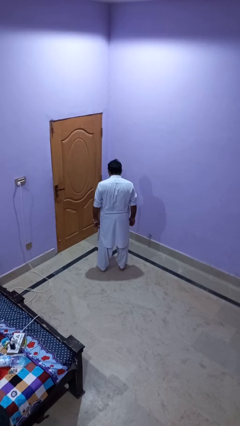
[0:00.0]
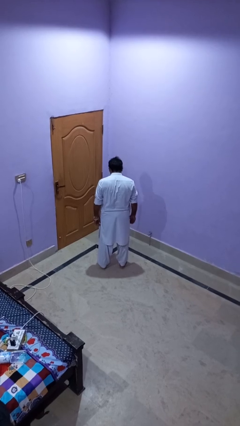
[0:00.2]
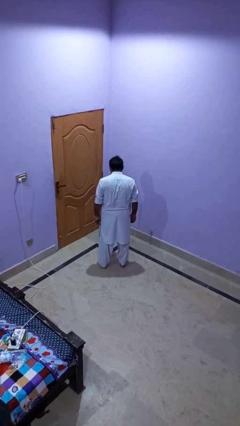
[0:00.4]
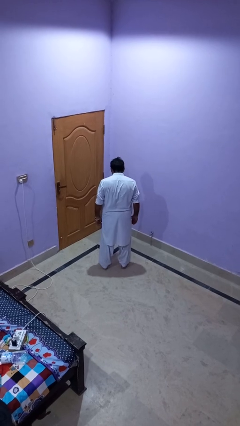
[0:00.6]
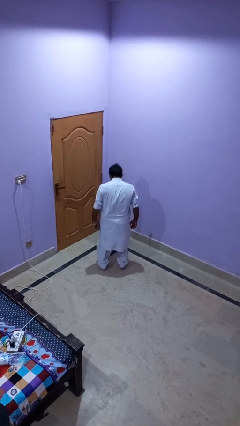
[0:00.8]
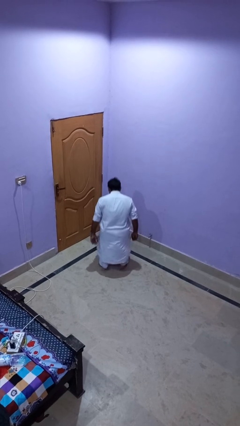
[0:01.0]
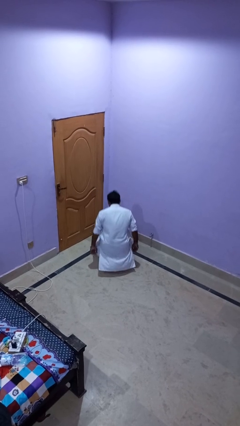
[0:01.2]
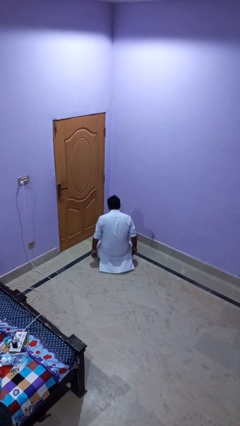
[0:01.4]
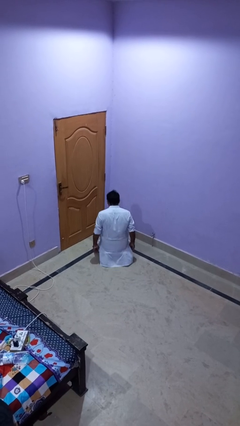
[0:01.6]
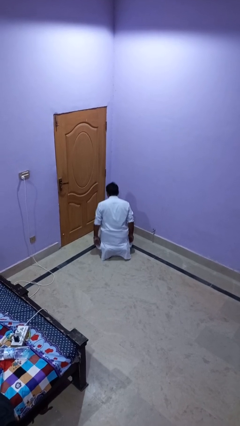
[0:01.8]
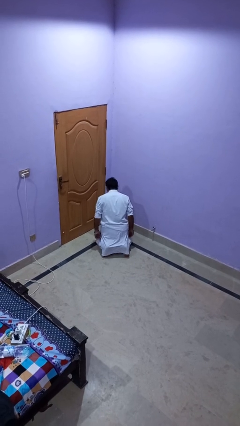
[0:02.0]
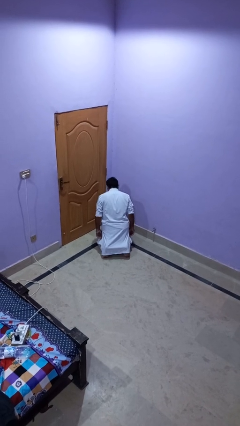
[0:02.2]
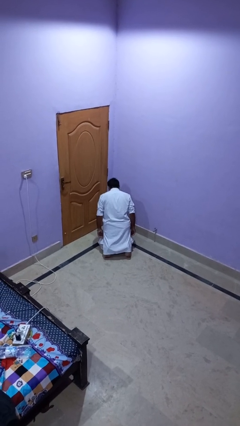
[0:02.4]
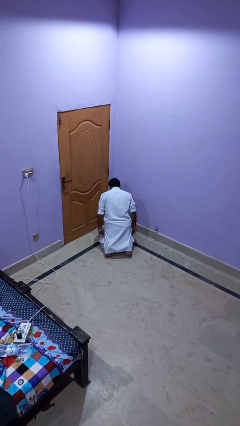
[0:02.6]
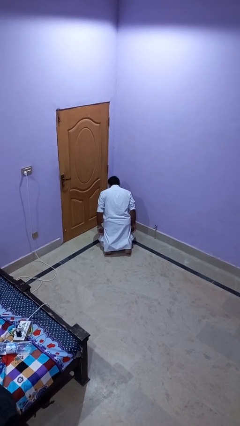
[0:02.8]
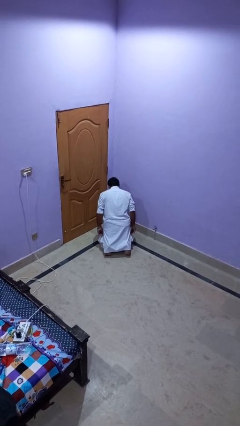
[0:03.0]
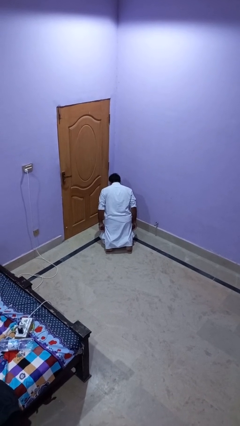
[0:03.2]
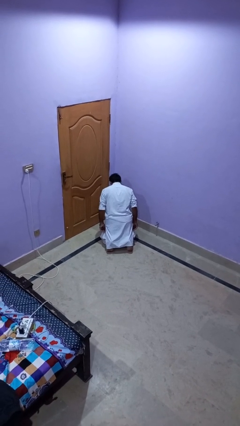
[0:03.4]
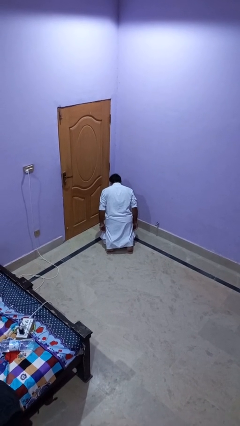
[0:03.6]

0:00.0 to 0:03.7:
person kneels

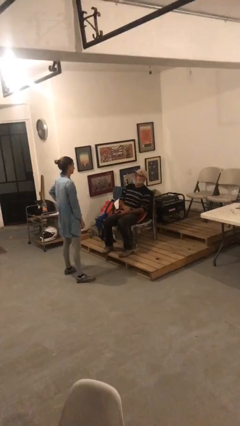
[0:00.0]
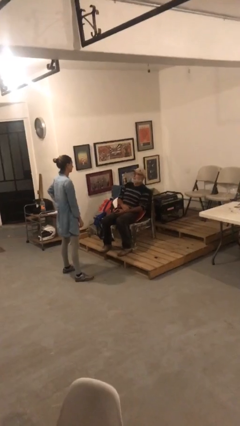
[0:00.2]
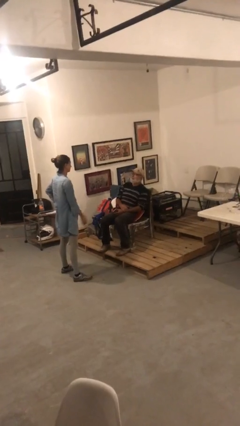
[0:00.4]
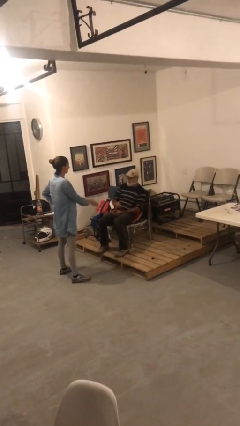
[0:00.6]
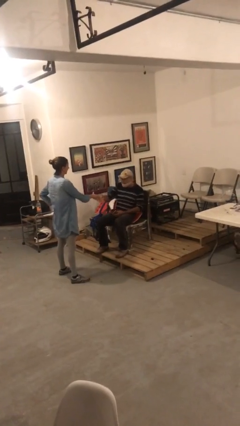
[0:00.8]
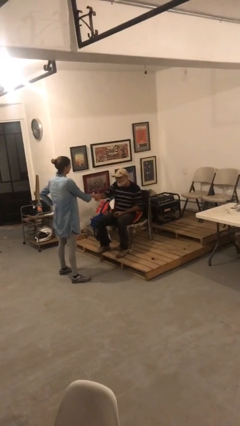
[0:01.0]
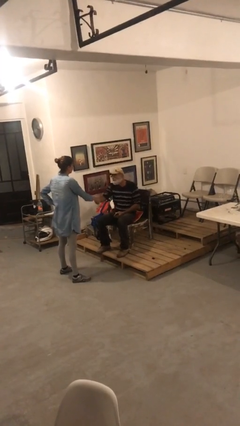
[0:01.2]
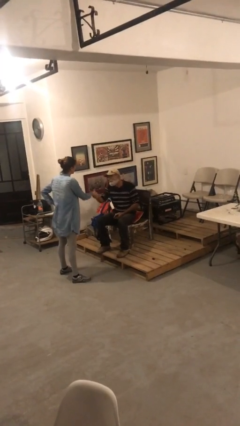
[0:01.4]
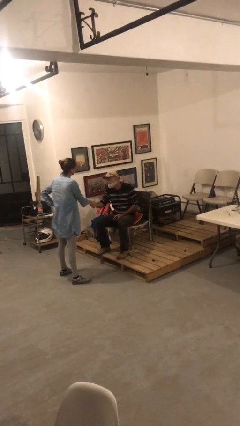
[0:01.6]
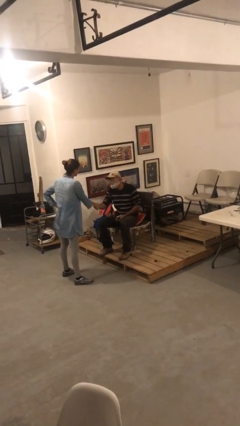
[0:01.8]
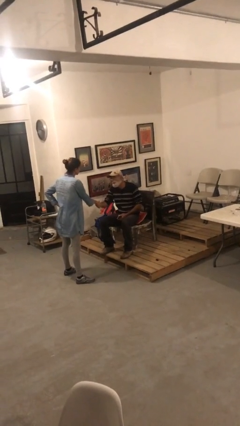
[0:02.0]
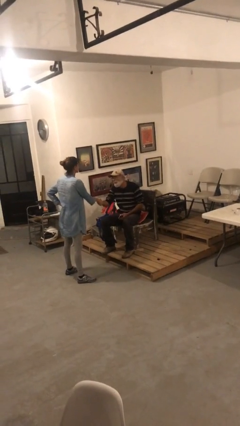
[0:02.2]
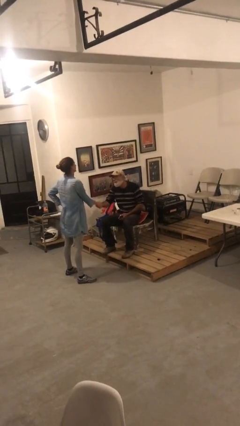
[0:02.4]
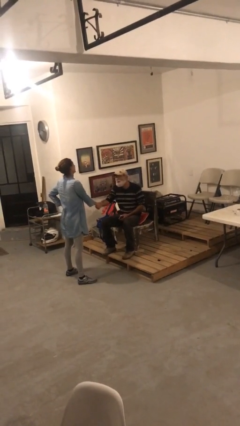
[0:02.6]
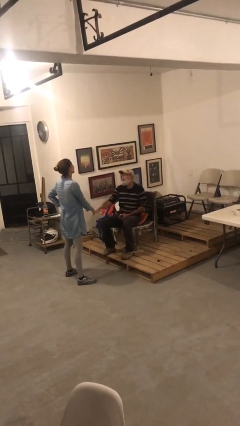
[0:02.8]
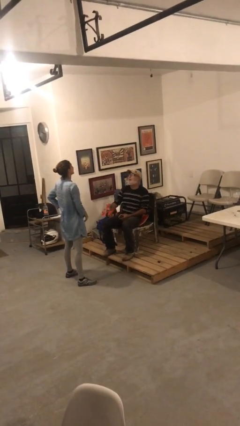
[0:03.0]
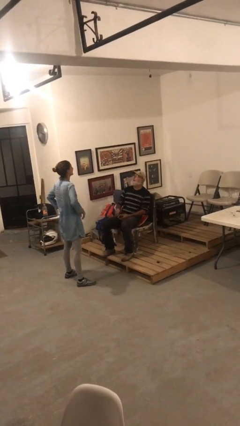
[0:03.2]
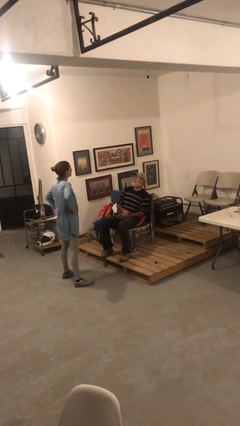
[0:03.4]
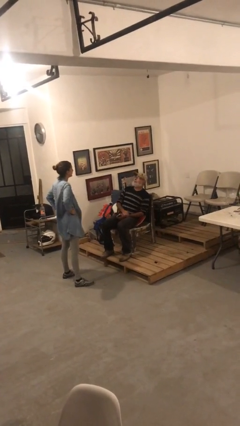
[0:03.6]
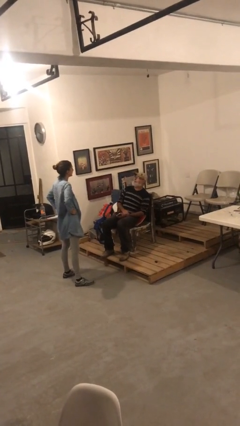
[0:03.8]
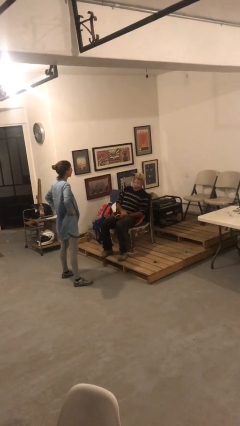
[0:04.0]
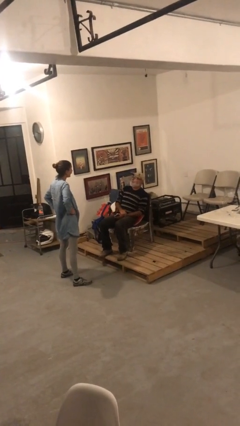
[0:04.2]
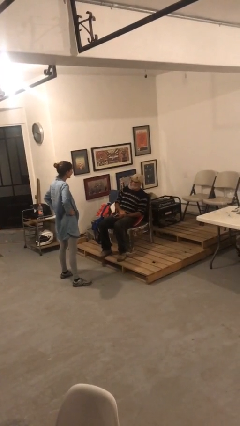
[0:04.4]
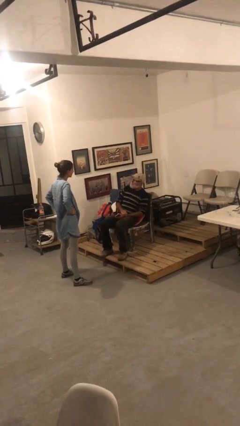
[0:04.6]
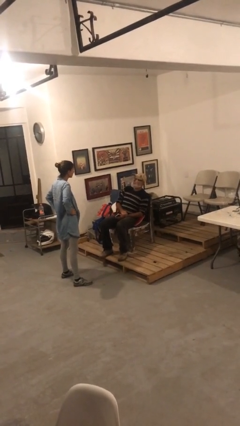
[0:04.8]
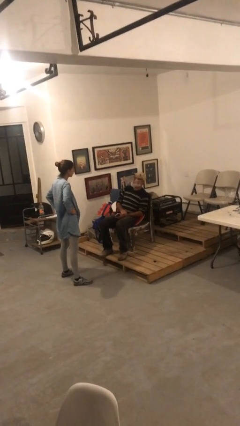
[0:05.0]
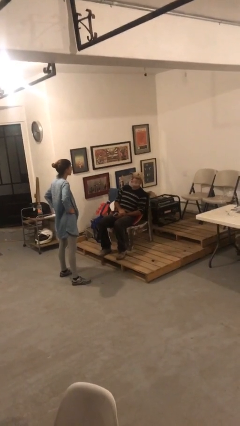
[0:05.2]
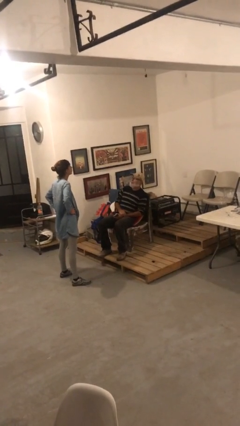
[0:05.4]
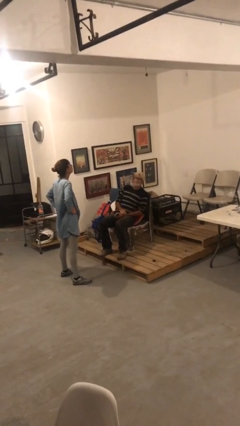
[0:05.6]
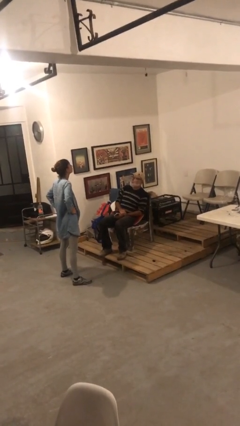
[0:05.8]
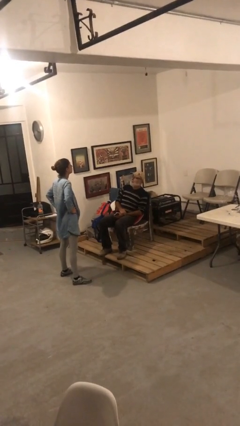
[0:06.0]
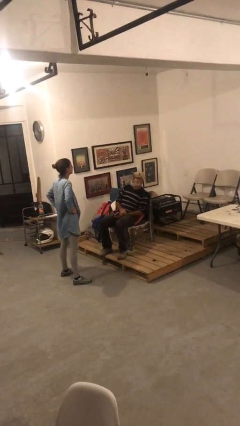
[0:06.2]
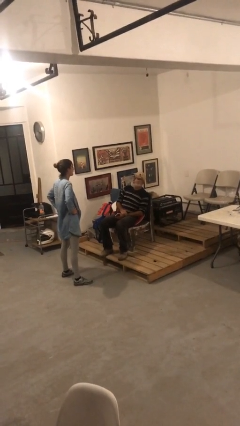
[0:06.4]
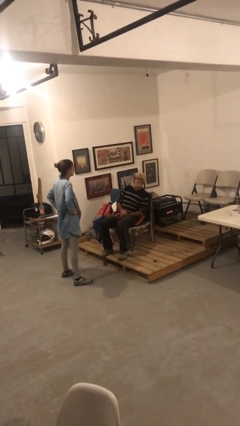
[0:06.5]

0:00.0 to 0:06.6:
person shakes hand

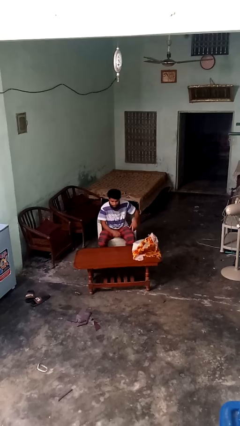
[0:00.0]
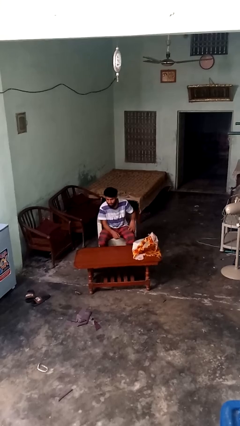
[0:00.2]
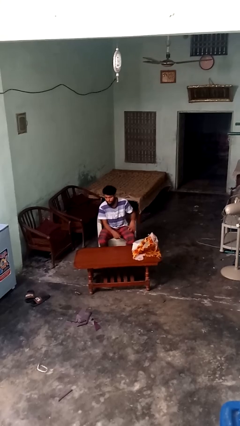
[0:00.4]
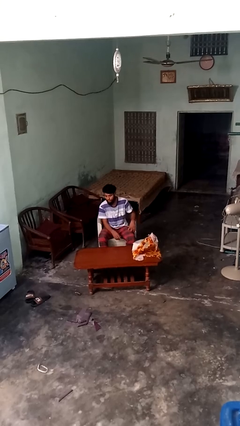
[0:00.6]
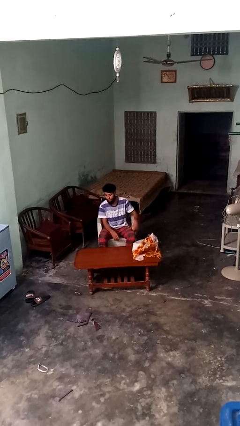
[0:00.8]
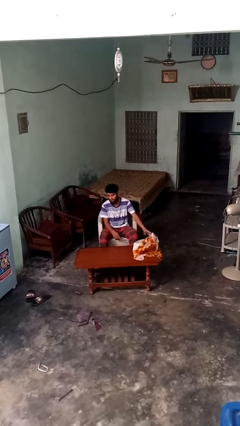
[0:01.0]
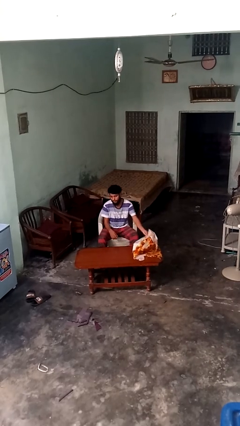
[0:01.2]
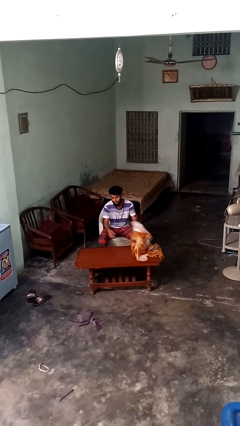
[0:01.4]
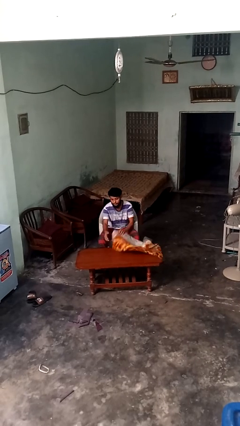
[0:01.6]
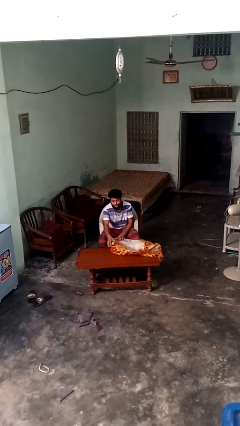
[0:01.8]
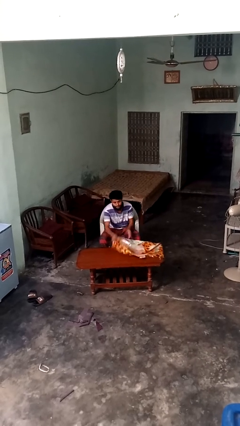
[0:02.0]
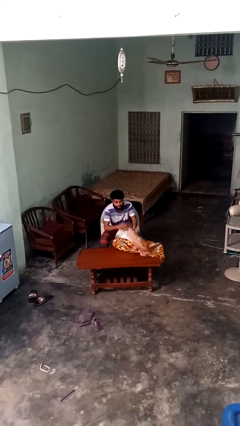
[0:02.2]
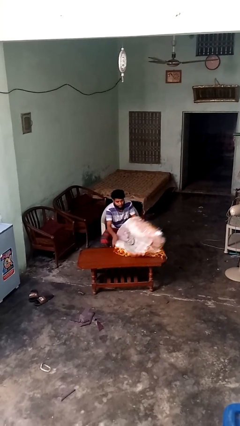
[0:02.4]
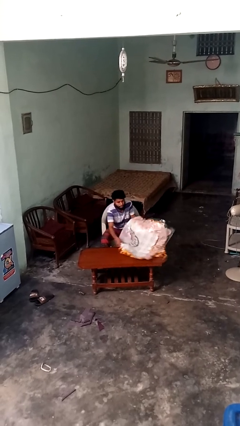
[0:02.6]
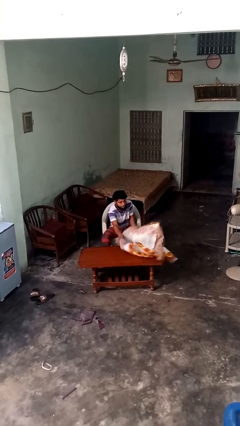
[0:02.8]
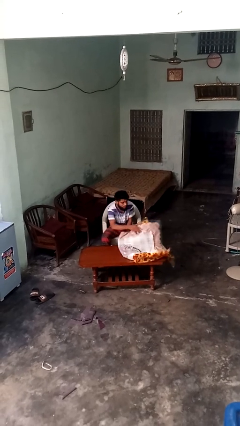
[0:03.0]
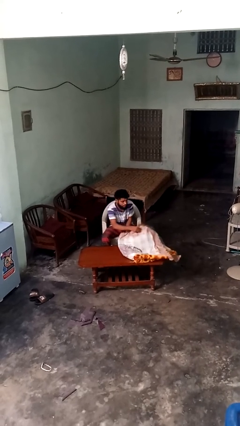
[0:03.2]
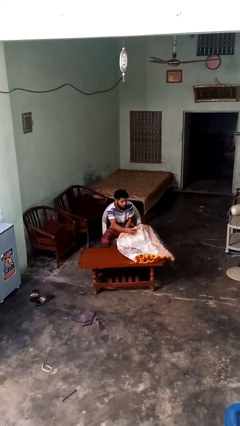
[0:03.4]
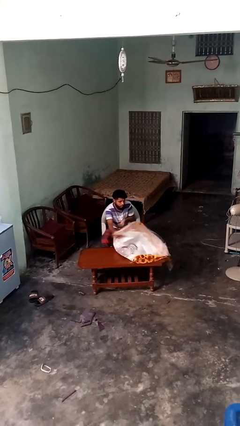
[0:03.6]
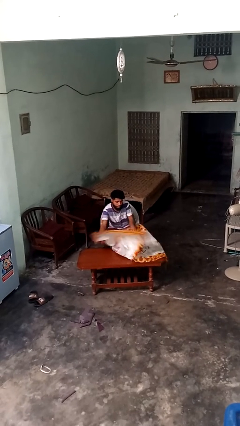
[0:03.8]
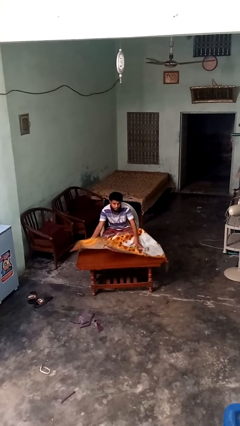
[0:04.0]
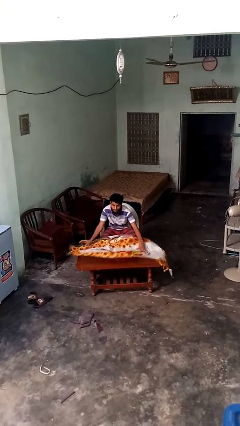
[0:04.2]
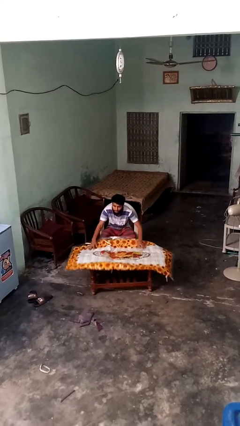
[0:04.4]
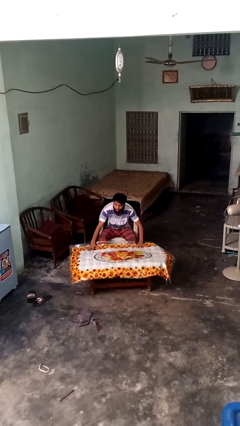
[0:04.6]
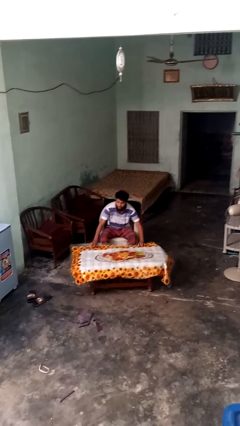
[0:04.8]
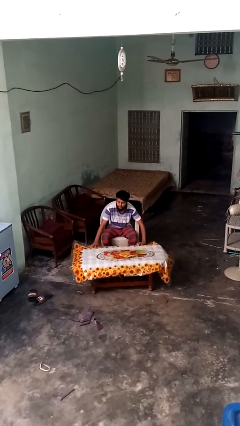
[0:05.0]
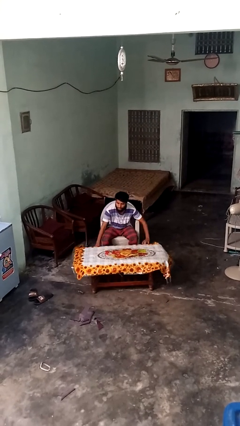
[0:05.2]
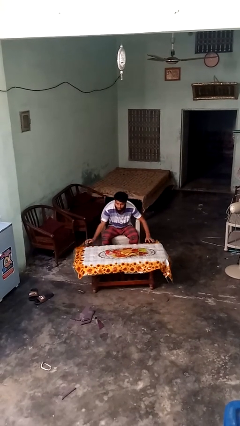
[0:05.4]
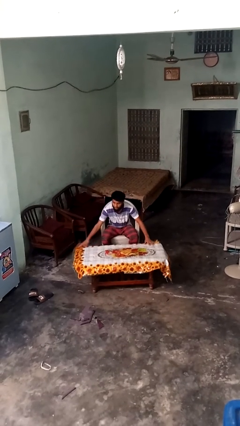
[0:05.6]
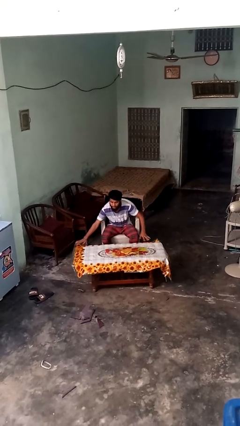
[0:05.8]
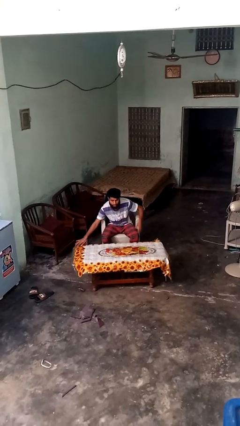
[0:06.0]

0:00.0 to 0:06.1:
person spreads tablecloth

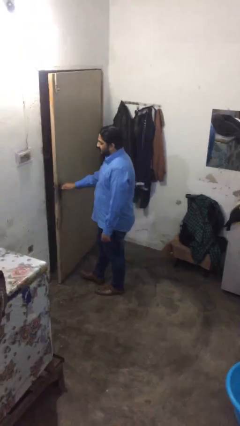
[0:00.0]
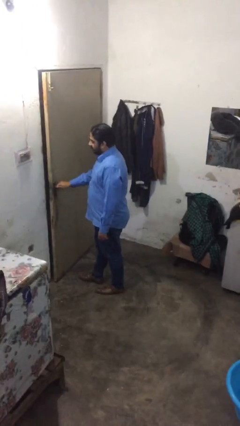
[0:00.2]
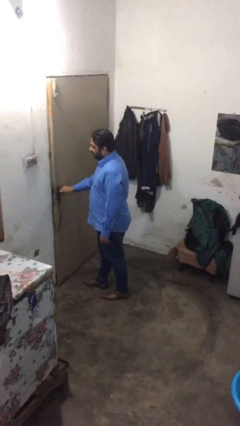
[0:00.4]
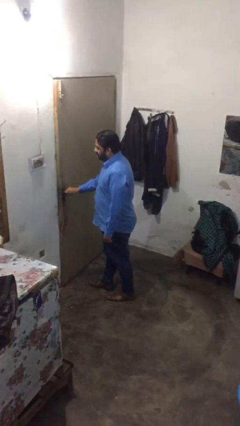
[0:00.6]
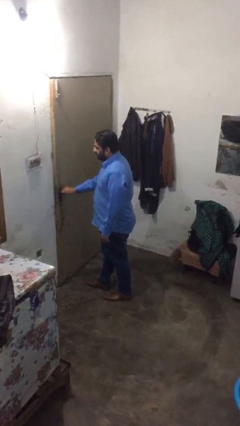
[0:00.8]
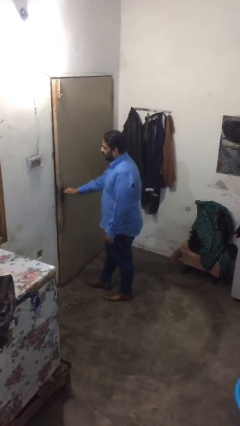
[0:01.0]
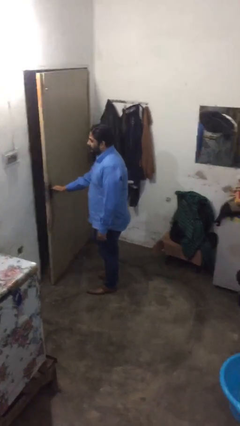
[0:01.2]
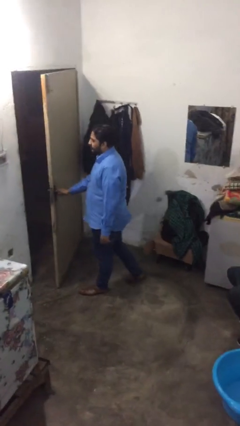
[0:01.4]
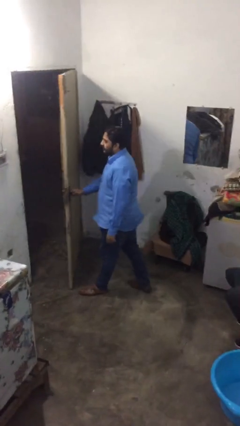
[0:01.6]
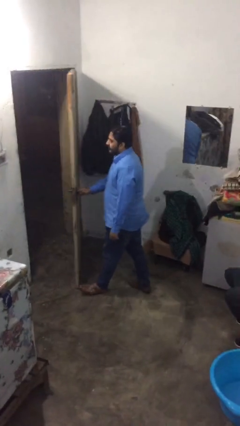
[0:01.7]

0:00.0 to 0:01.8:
person opens facility door

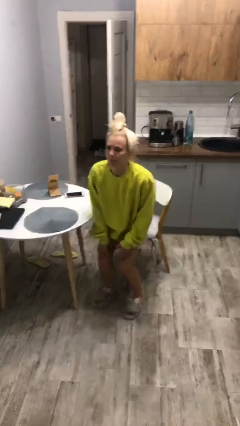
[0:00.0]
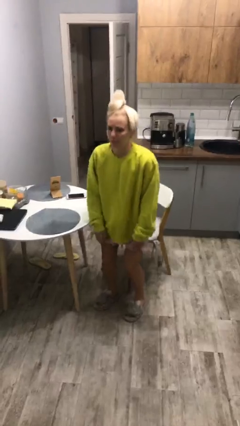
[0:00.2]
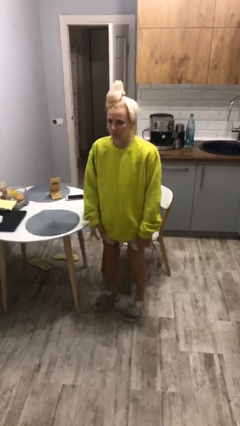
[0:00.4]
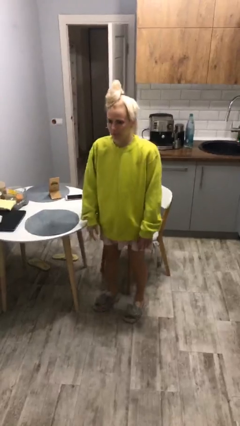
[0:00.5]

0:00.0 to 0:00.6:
person stands up
